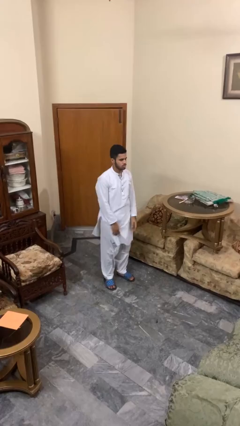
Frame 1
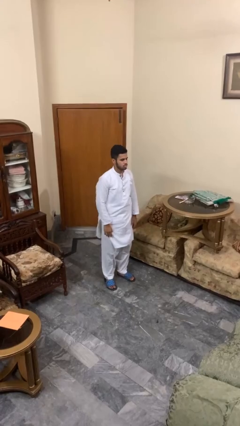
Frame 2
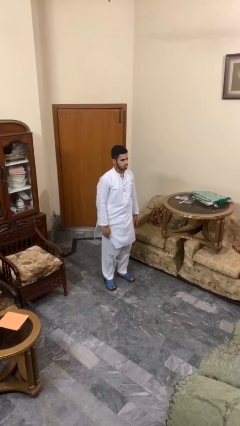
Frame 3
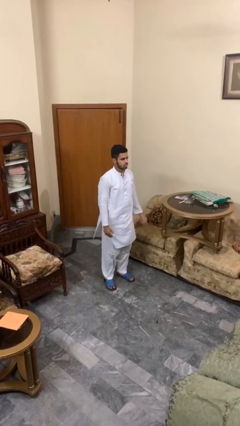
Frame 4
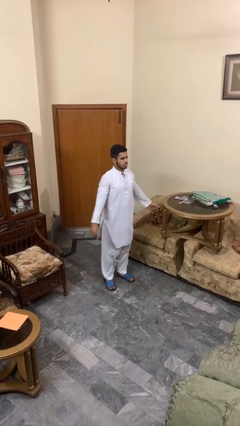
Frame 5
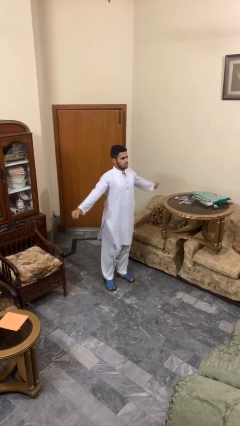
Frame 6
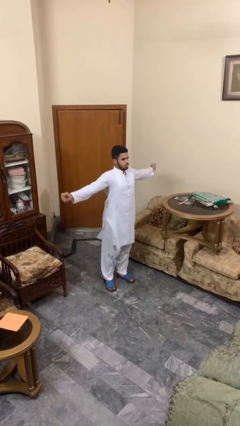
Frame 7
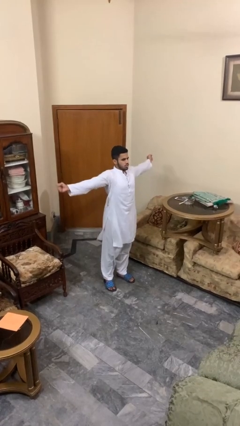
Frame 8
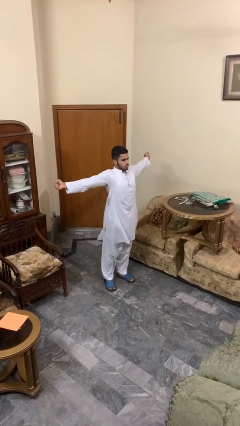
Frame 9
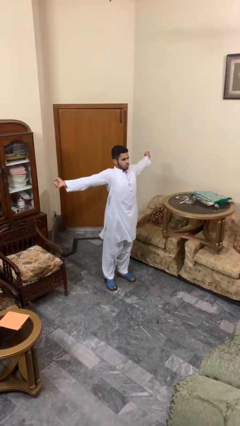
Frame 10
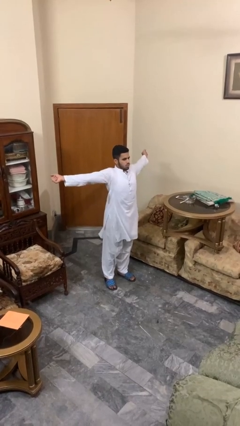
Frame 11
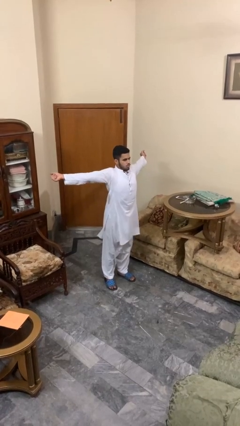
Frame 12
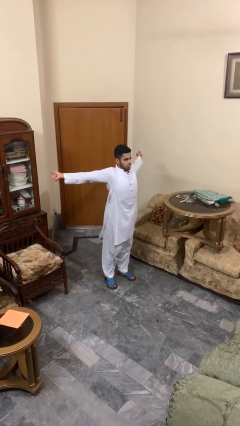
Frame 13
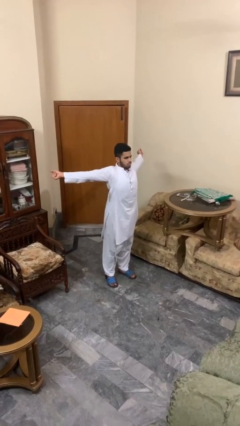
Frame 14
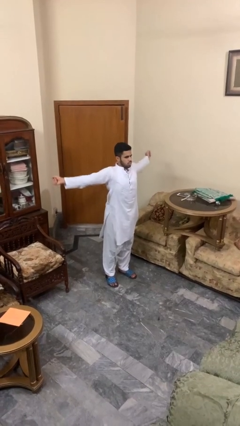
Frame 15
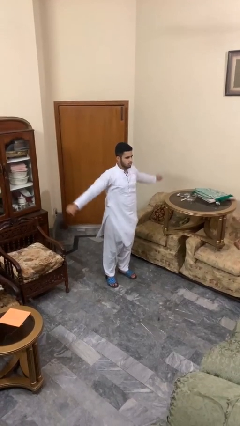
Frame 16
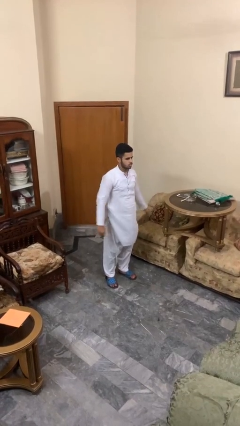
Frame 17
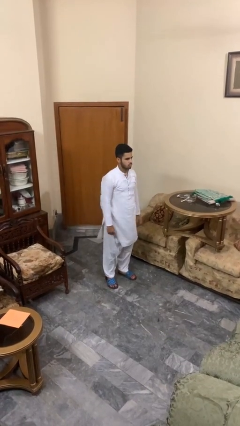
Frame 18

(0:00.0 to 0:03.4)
person stretches arms to side

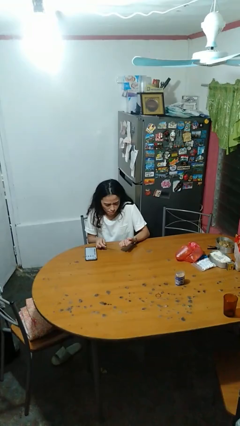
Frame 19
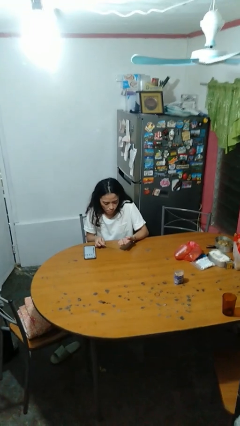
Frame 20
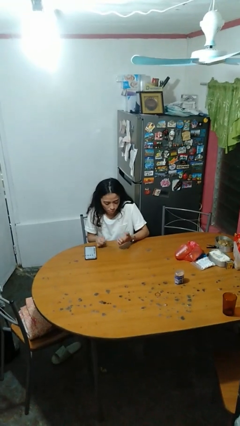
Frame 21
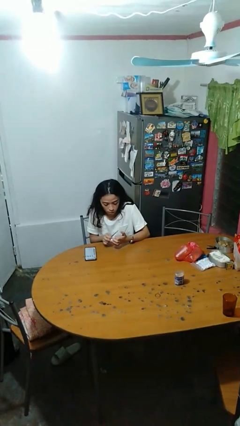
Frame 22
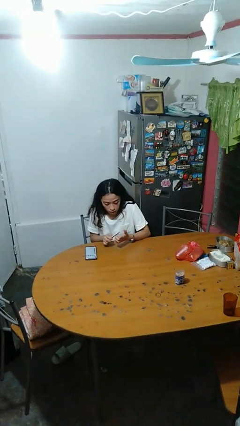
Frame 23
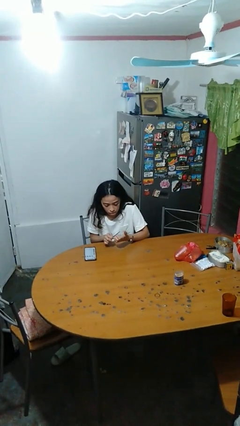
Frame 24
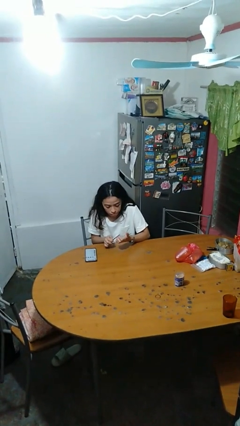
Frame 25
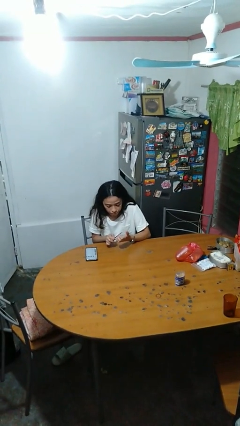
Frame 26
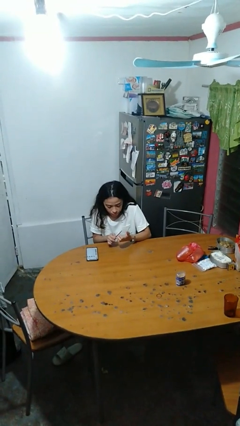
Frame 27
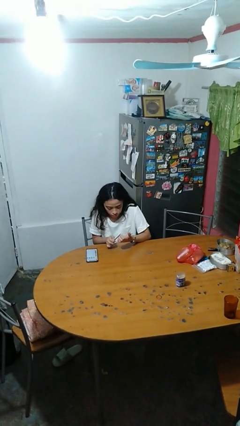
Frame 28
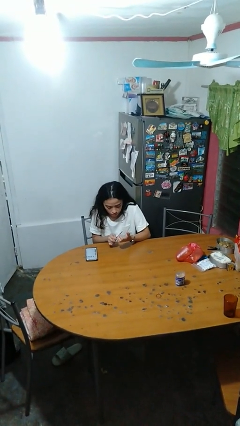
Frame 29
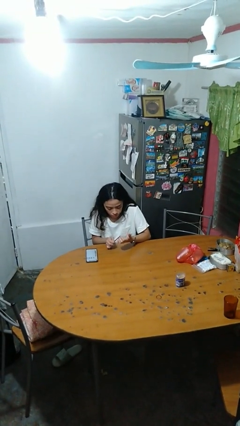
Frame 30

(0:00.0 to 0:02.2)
person files fingernails

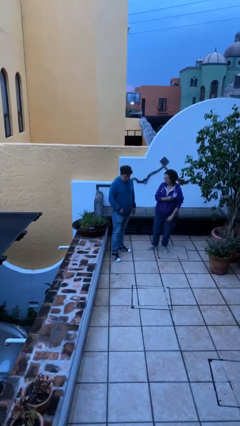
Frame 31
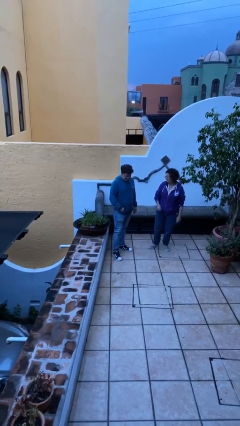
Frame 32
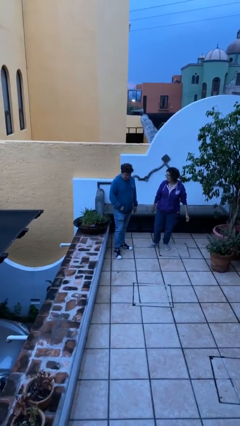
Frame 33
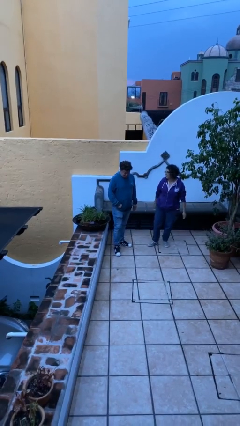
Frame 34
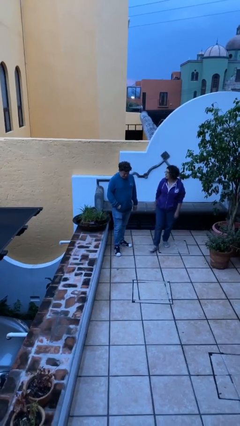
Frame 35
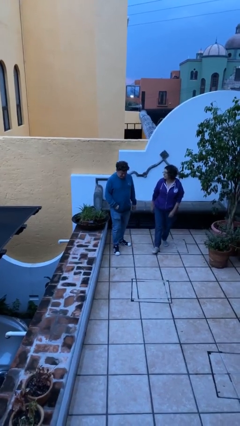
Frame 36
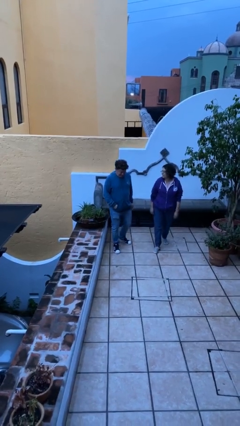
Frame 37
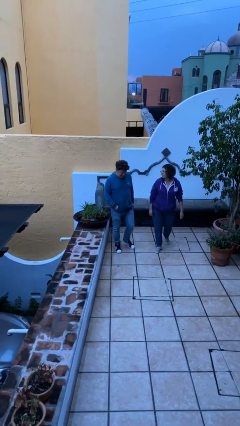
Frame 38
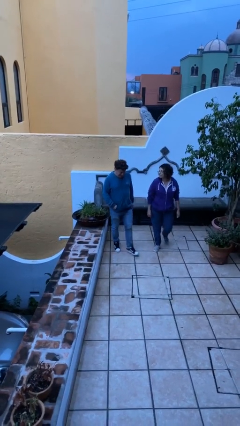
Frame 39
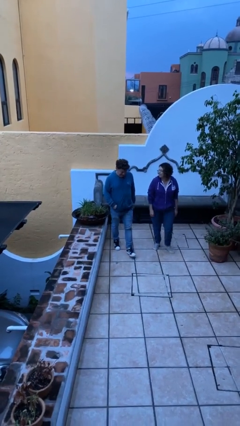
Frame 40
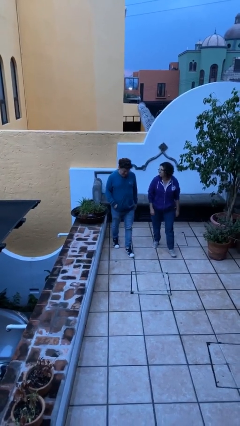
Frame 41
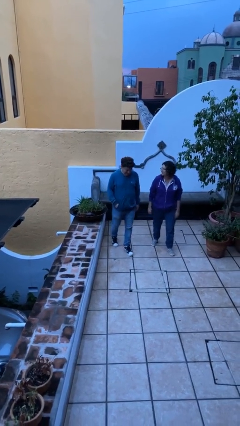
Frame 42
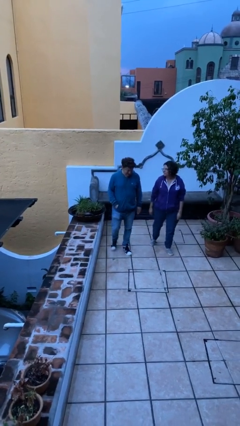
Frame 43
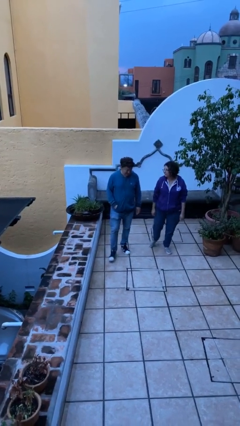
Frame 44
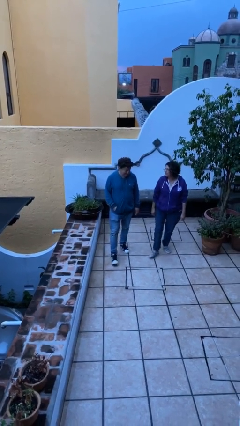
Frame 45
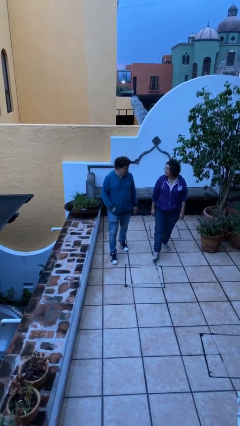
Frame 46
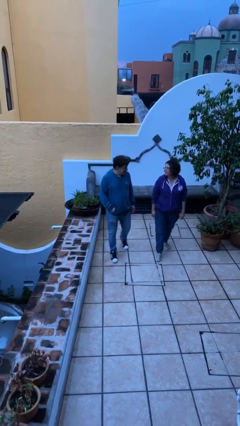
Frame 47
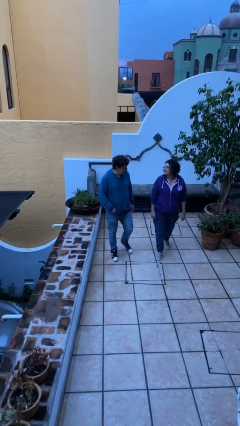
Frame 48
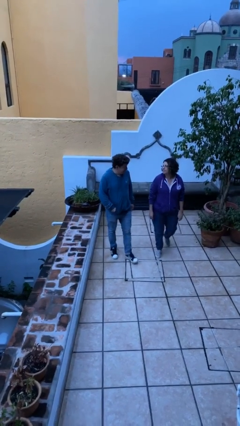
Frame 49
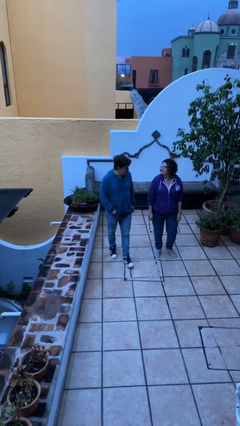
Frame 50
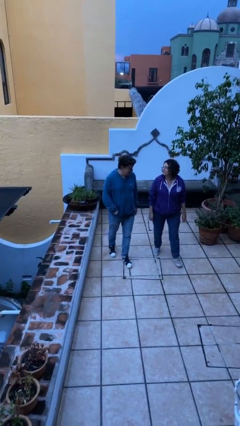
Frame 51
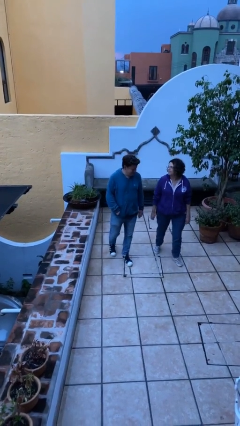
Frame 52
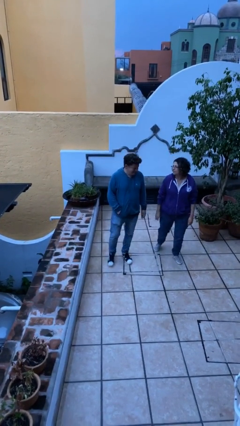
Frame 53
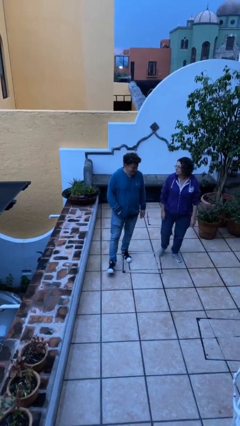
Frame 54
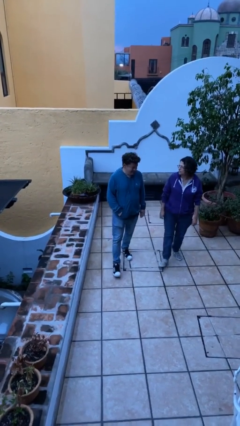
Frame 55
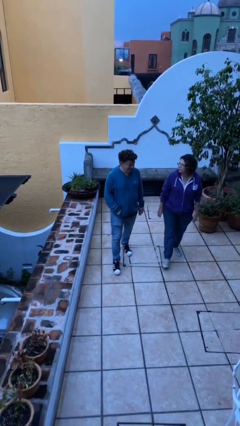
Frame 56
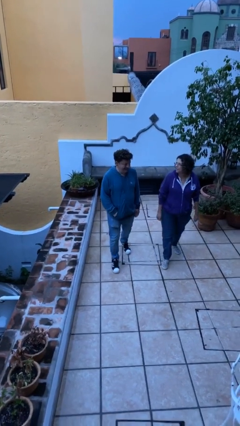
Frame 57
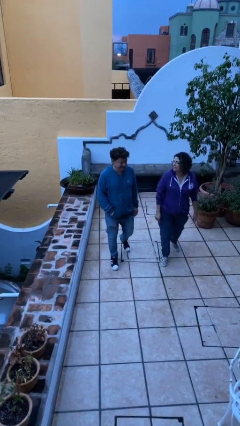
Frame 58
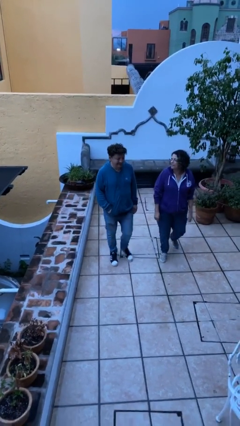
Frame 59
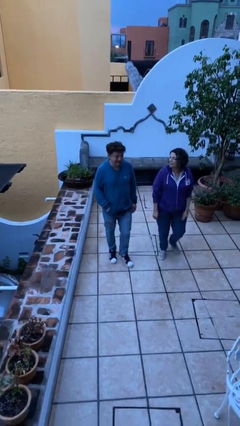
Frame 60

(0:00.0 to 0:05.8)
person talks to person

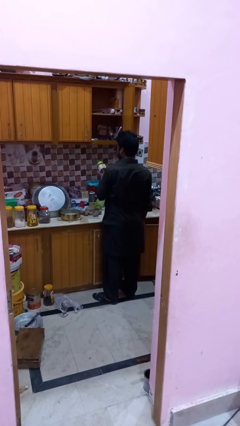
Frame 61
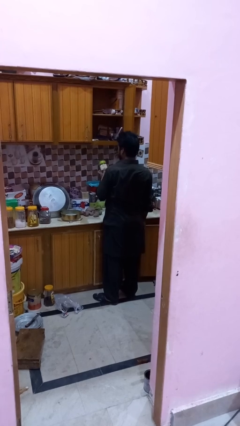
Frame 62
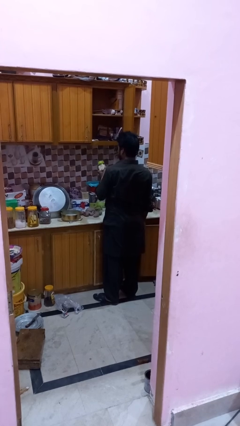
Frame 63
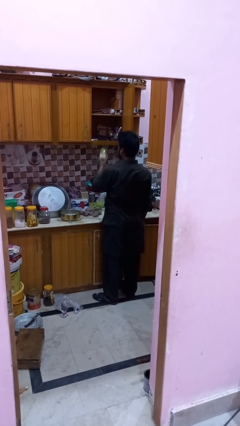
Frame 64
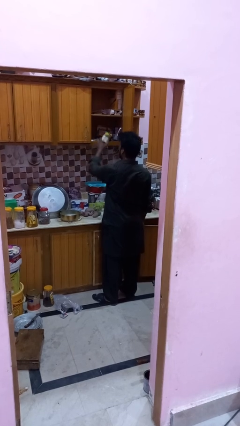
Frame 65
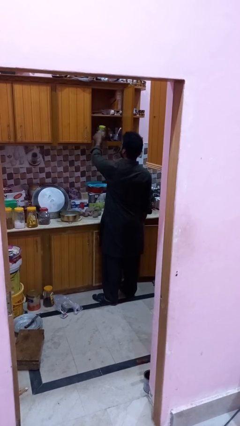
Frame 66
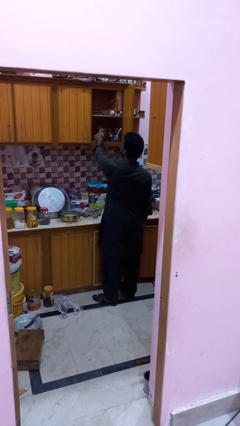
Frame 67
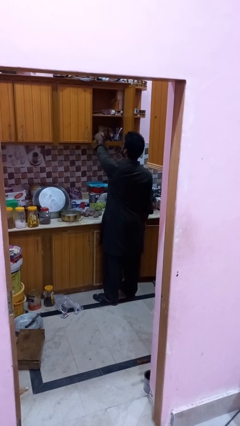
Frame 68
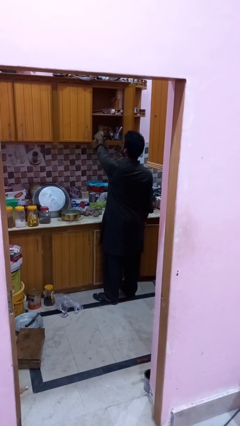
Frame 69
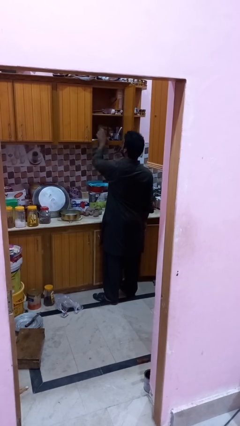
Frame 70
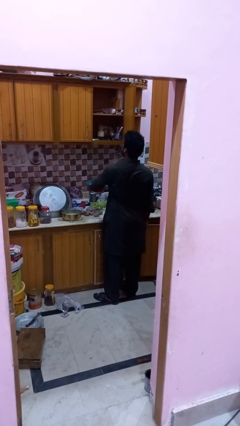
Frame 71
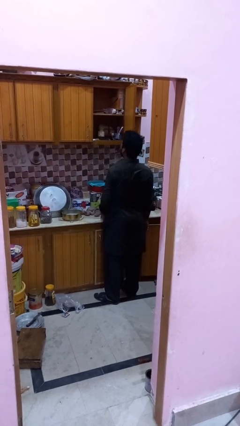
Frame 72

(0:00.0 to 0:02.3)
person puts object in cabinet

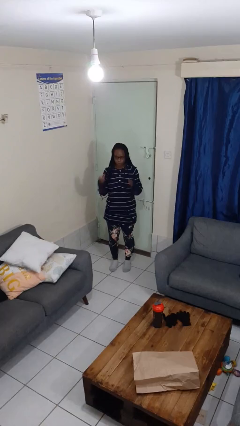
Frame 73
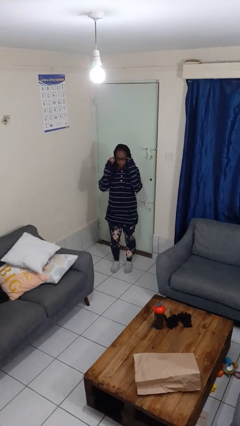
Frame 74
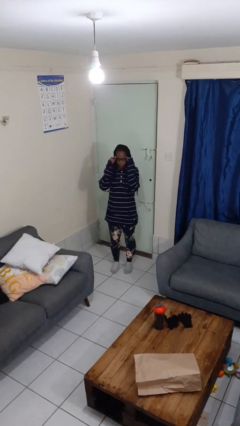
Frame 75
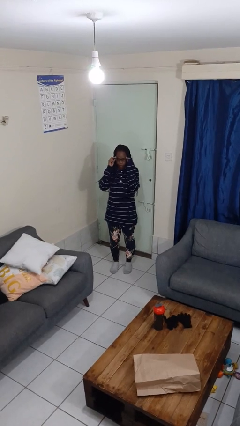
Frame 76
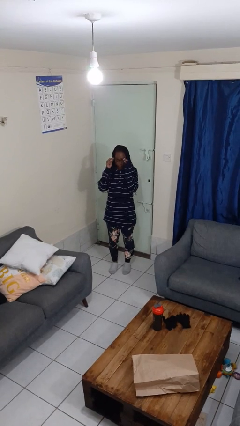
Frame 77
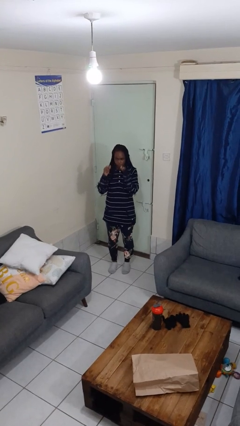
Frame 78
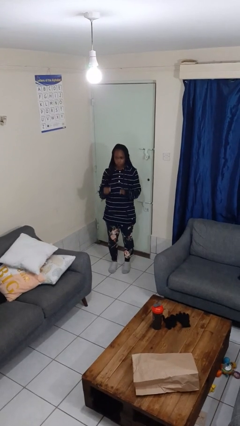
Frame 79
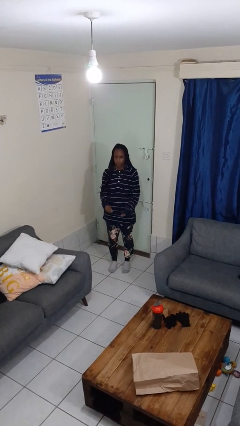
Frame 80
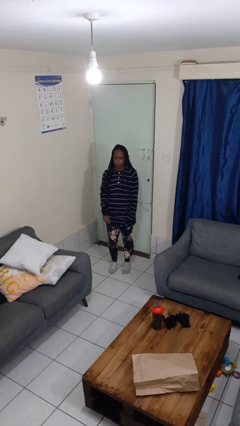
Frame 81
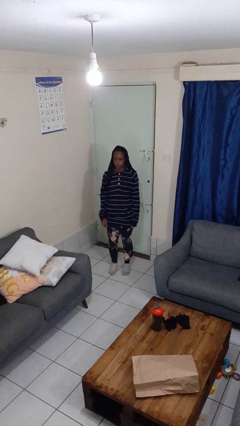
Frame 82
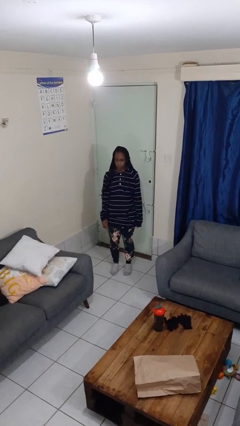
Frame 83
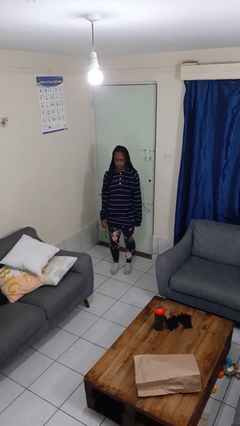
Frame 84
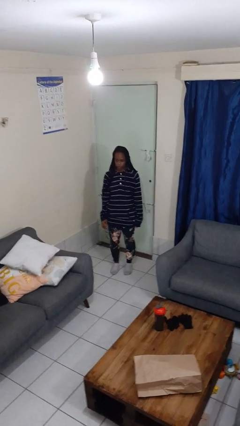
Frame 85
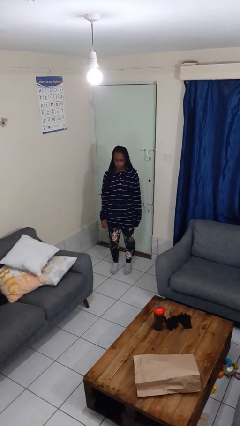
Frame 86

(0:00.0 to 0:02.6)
person takes off glasses

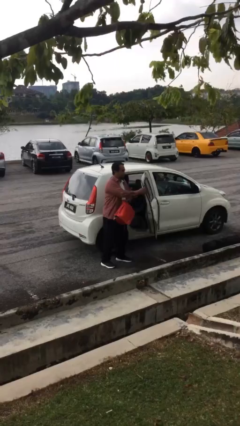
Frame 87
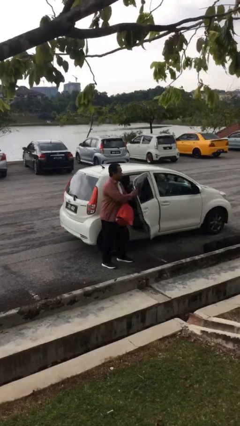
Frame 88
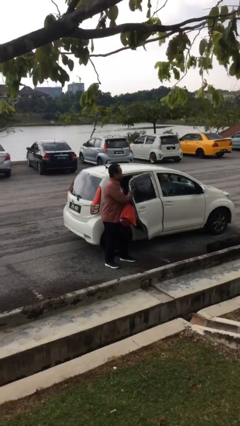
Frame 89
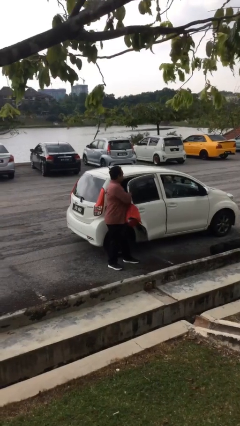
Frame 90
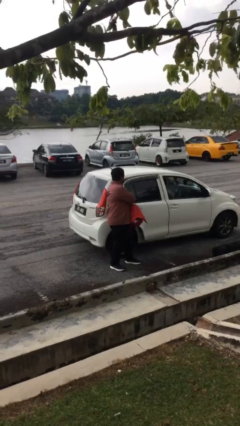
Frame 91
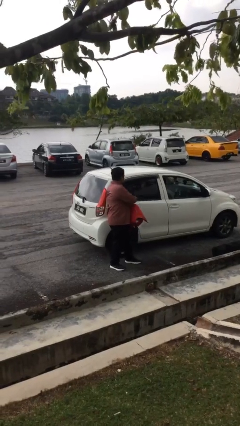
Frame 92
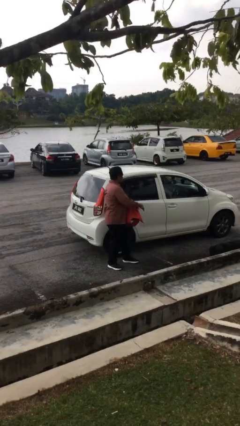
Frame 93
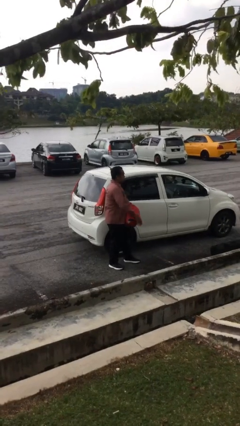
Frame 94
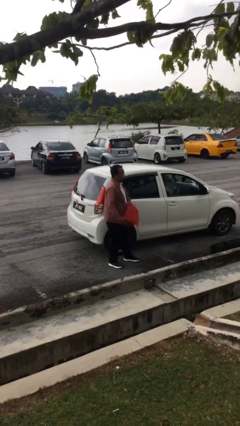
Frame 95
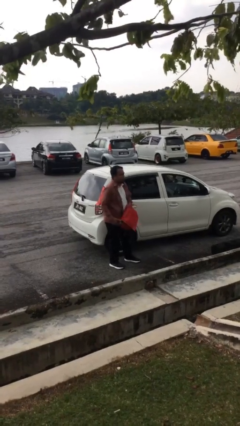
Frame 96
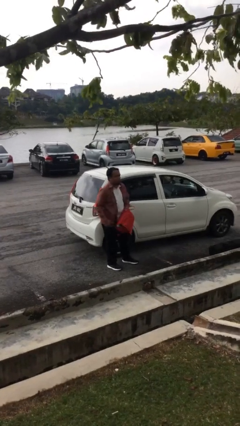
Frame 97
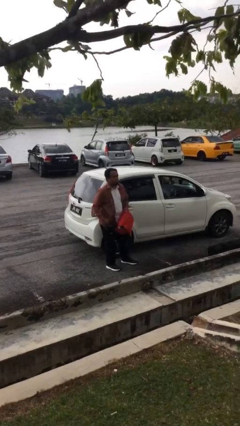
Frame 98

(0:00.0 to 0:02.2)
person closes car door
